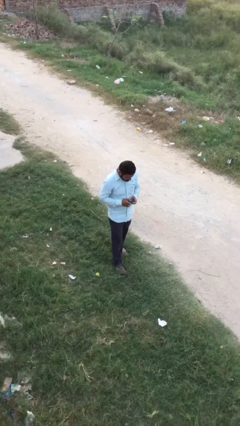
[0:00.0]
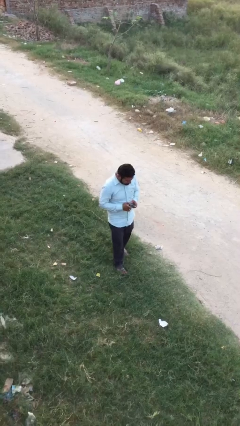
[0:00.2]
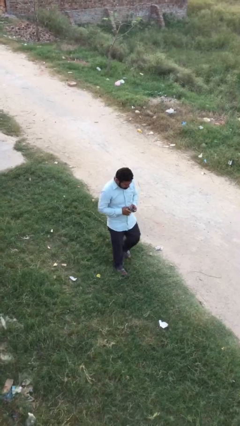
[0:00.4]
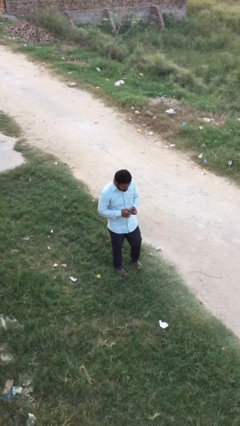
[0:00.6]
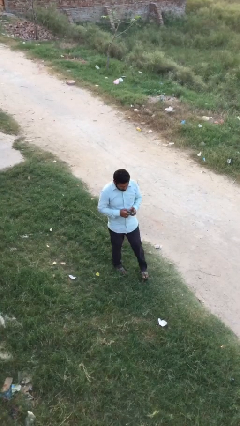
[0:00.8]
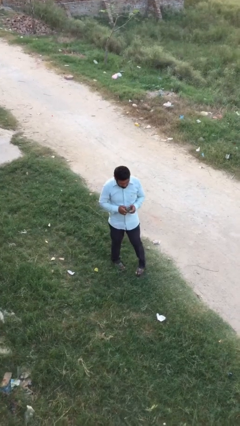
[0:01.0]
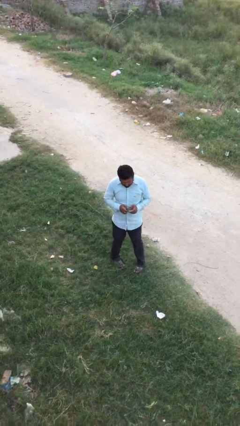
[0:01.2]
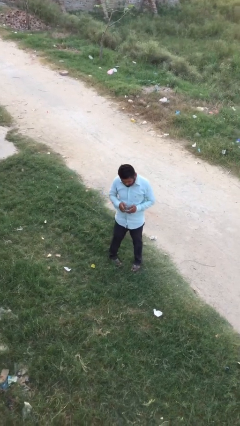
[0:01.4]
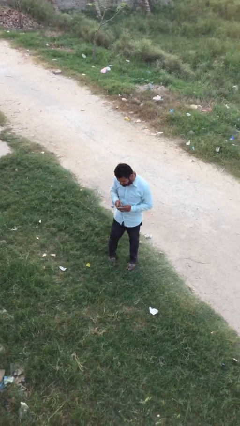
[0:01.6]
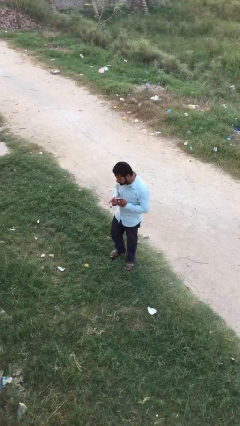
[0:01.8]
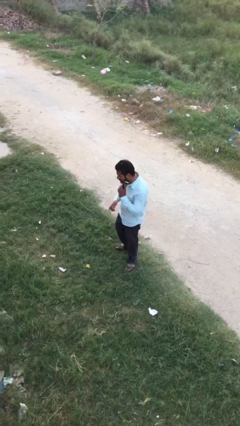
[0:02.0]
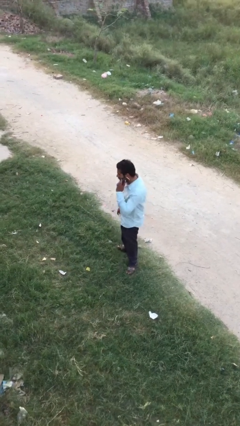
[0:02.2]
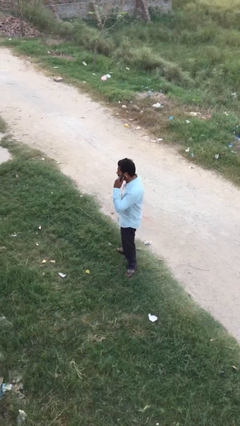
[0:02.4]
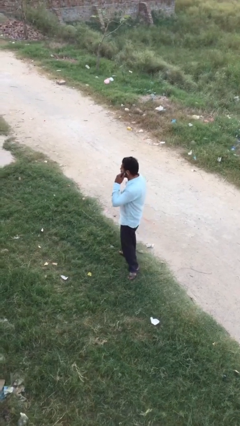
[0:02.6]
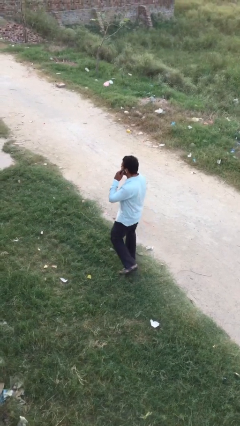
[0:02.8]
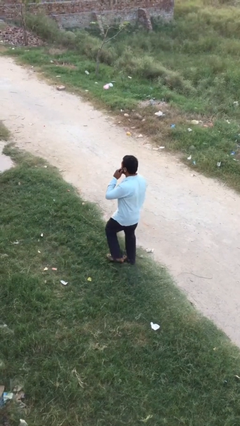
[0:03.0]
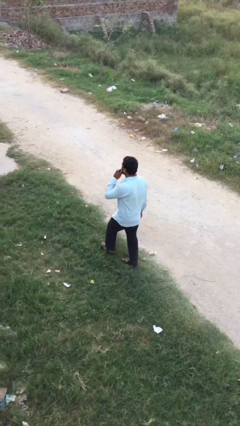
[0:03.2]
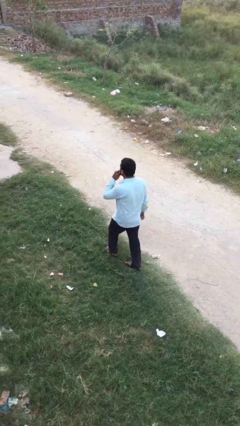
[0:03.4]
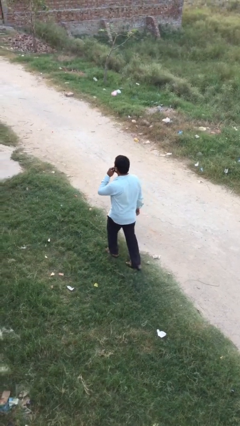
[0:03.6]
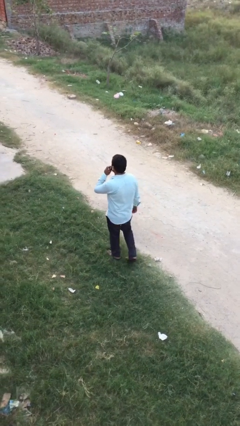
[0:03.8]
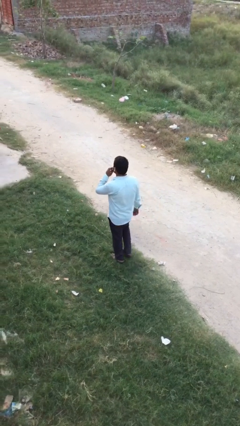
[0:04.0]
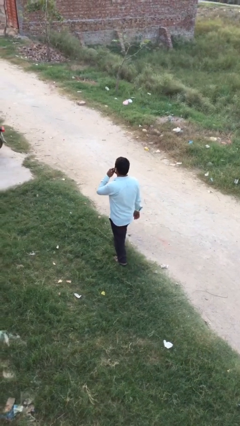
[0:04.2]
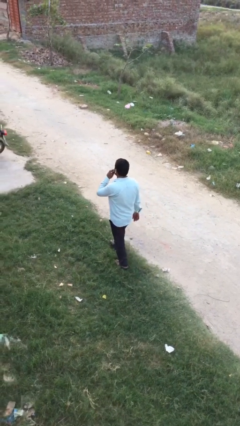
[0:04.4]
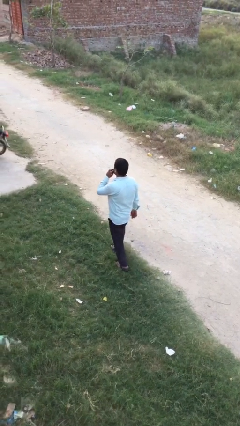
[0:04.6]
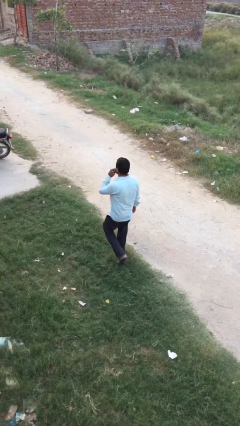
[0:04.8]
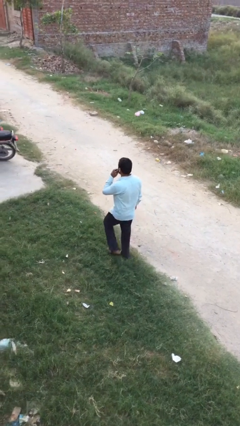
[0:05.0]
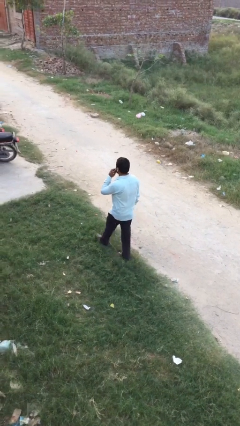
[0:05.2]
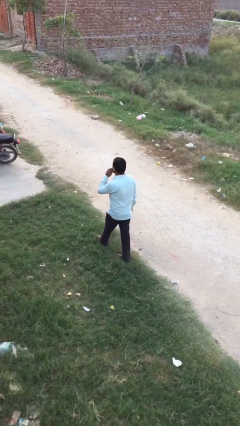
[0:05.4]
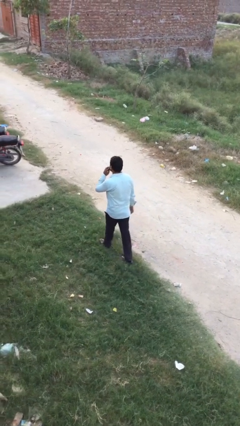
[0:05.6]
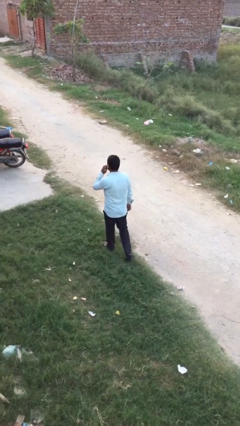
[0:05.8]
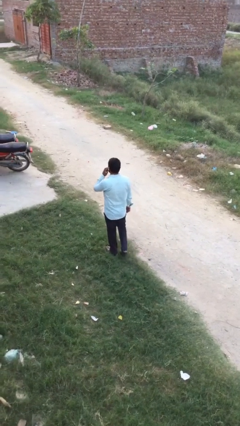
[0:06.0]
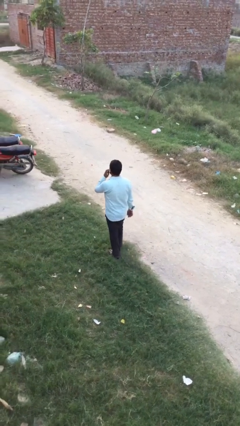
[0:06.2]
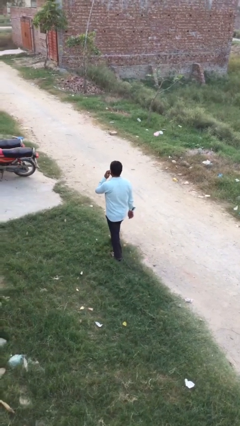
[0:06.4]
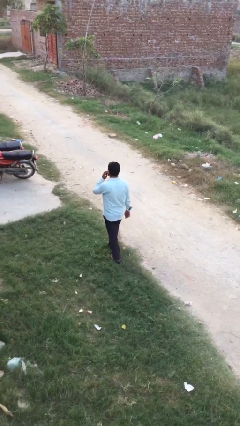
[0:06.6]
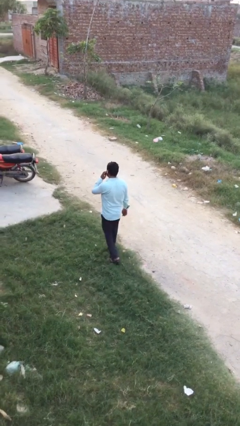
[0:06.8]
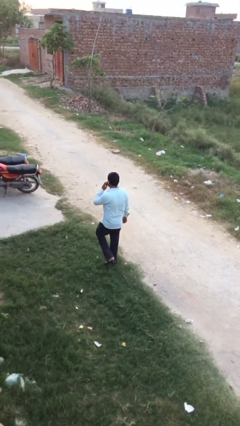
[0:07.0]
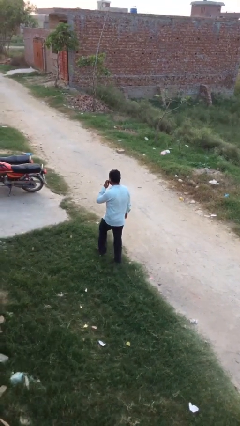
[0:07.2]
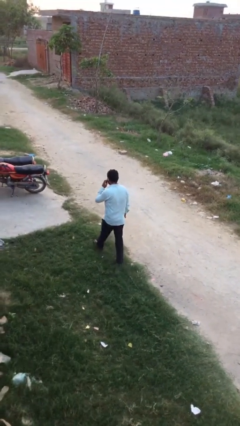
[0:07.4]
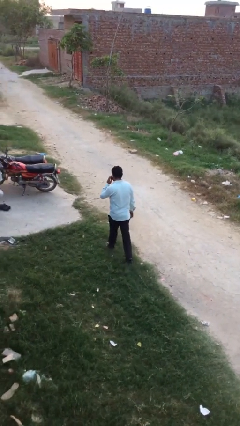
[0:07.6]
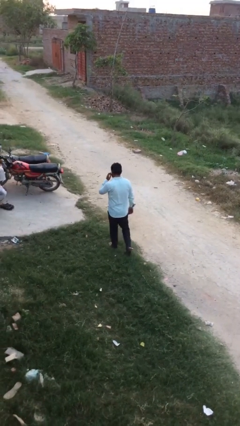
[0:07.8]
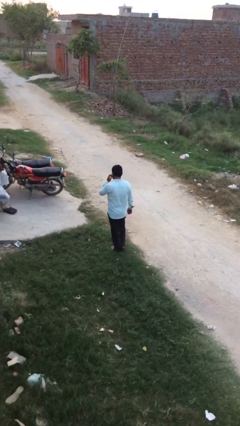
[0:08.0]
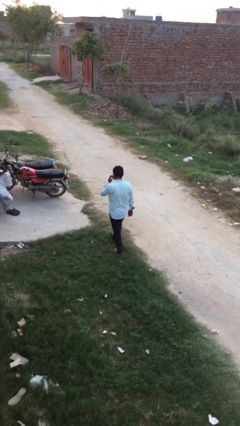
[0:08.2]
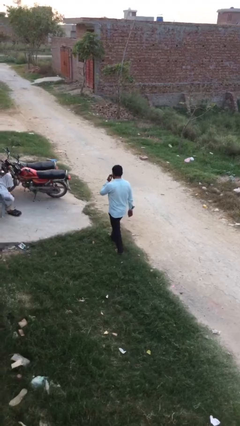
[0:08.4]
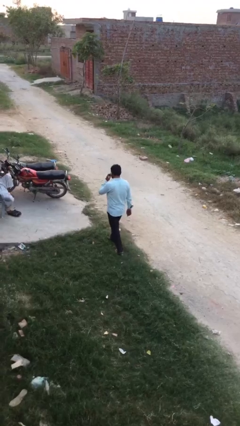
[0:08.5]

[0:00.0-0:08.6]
person talks on phone

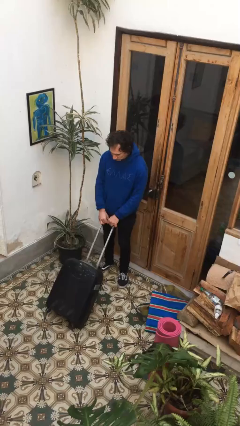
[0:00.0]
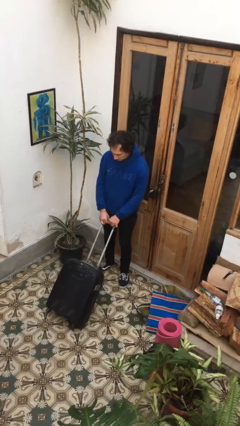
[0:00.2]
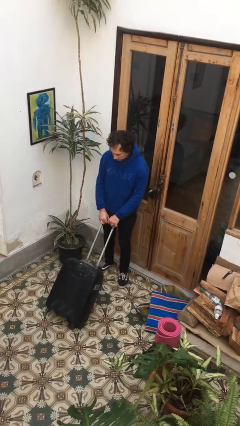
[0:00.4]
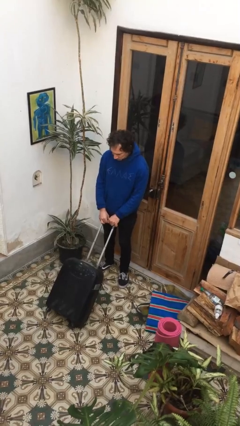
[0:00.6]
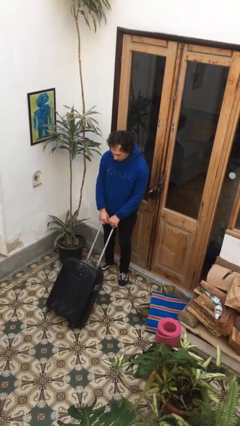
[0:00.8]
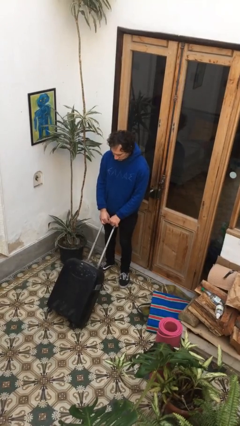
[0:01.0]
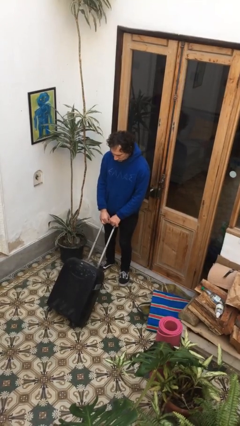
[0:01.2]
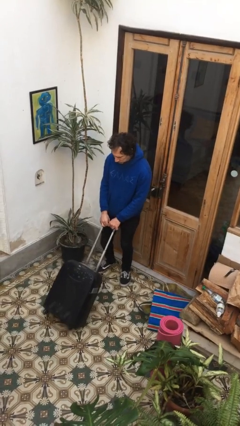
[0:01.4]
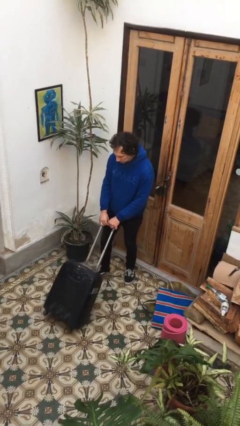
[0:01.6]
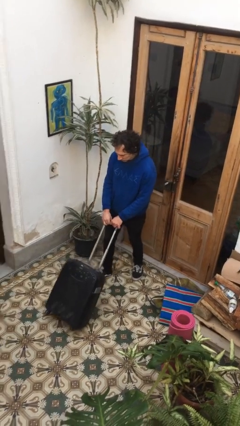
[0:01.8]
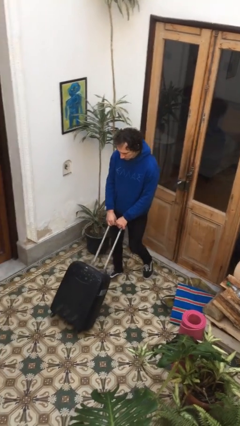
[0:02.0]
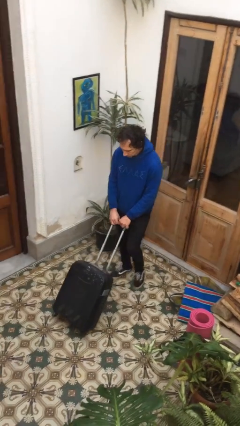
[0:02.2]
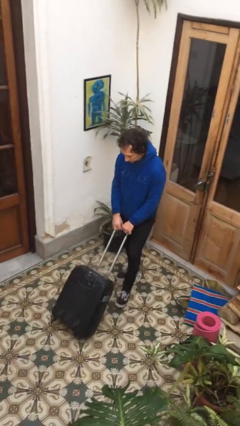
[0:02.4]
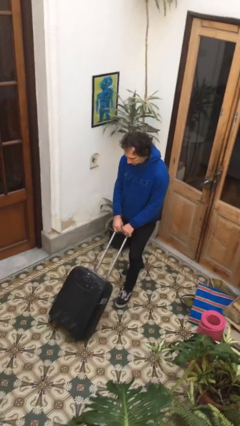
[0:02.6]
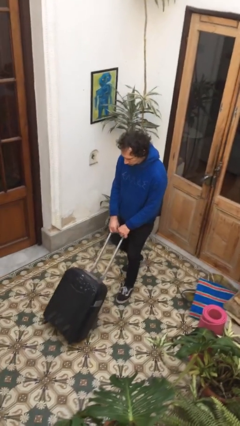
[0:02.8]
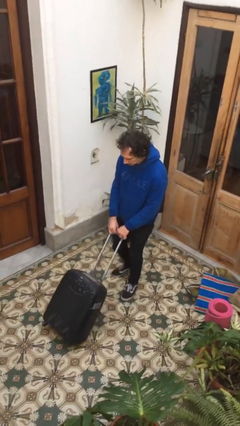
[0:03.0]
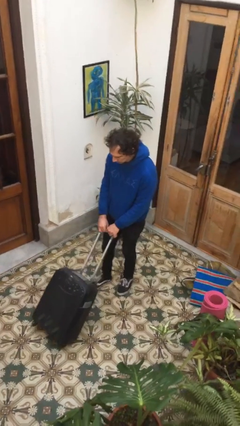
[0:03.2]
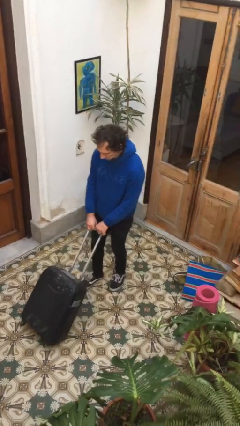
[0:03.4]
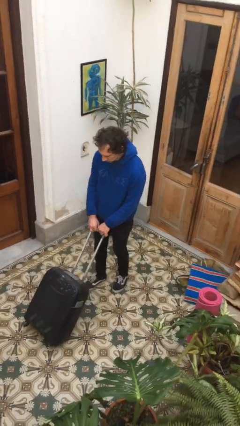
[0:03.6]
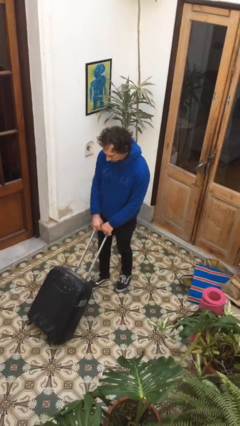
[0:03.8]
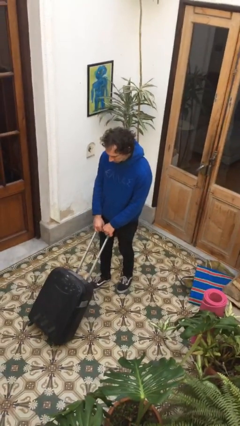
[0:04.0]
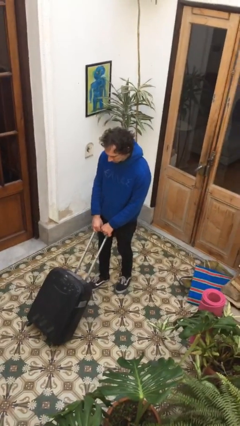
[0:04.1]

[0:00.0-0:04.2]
person pushes wheeled cart

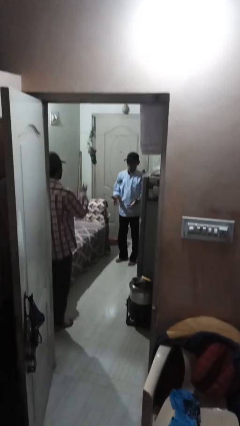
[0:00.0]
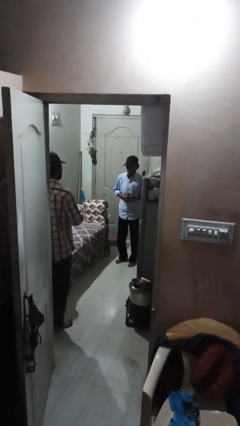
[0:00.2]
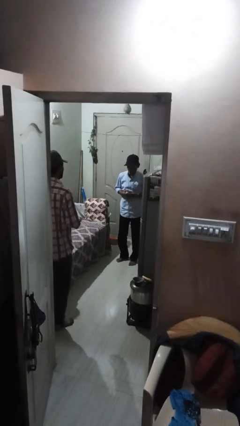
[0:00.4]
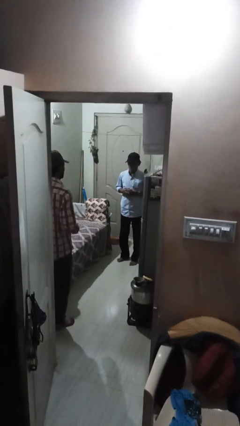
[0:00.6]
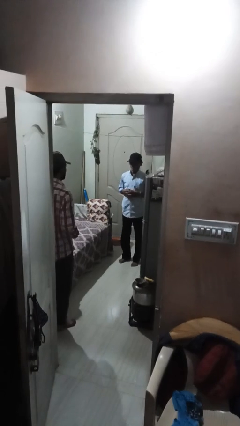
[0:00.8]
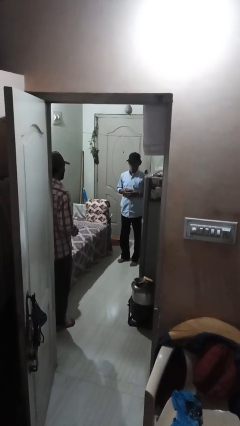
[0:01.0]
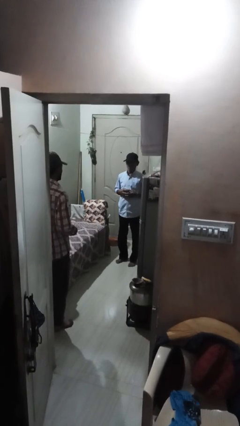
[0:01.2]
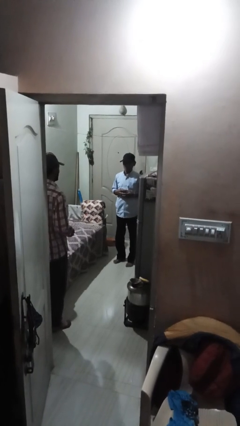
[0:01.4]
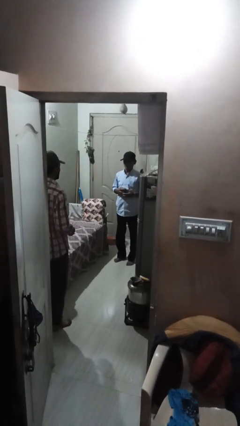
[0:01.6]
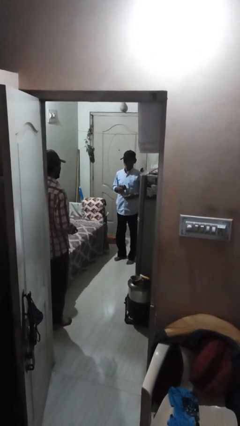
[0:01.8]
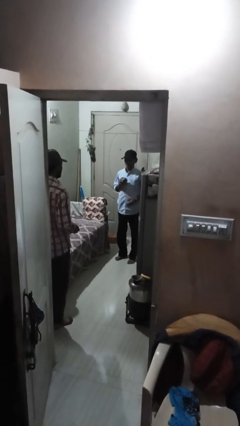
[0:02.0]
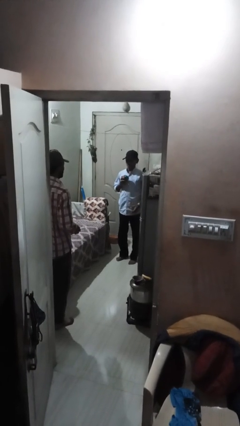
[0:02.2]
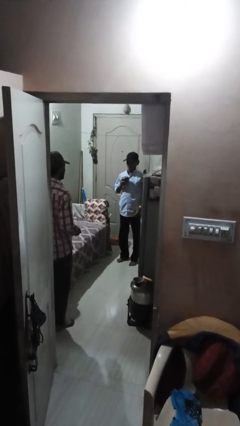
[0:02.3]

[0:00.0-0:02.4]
person catches object from person

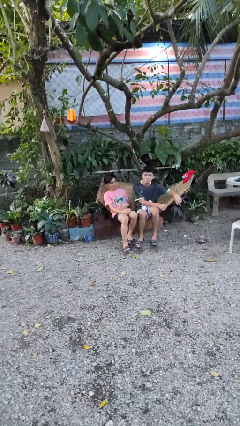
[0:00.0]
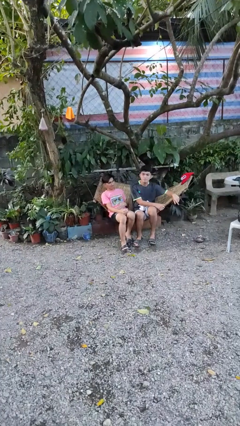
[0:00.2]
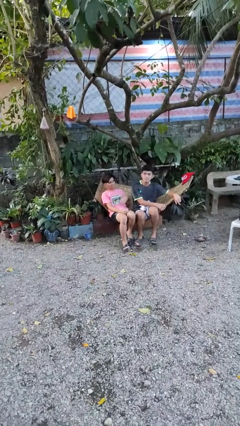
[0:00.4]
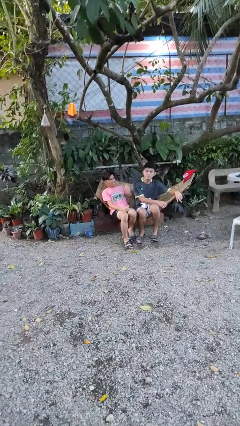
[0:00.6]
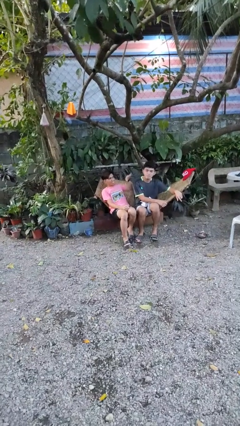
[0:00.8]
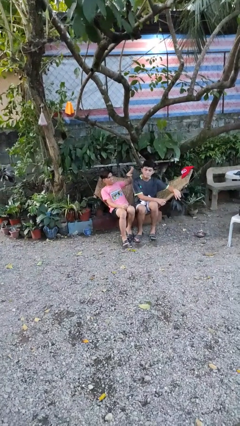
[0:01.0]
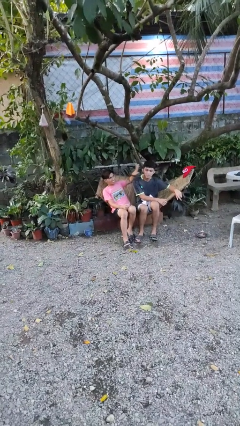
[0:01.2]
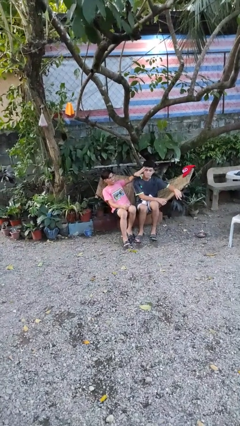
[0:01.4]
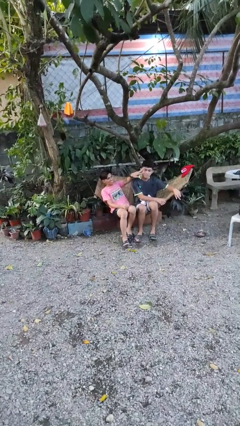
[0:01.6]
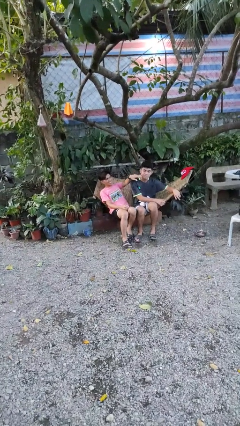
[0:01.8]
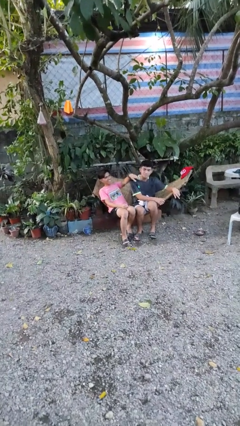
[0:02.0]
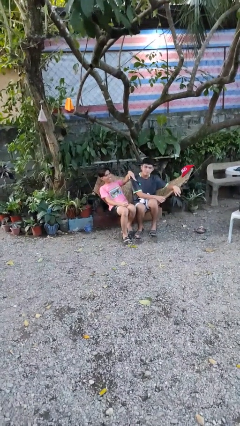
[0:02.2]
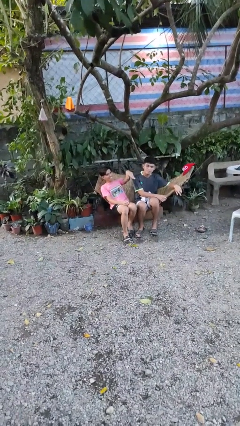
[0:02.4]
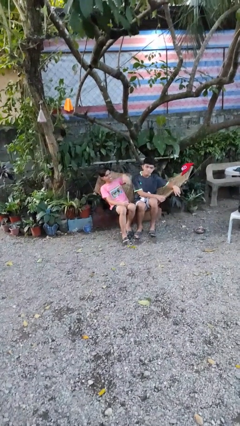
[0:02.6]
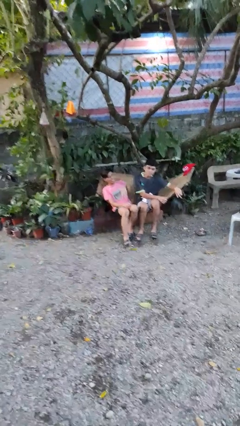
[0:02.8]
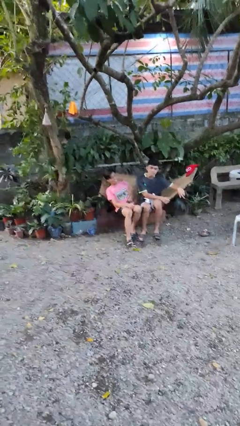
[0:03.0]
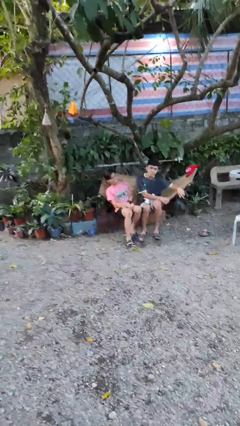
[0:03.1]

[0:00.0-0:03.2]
person touches face of person
